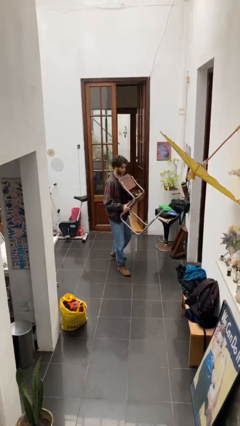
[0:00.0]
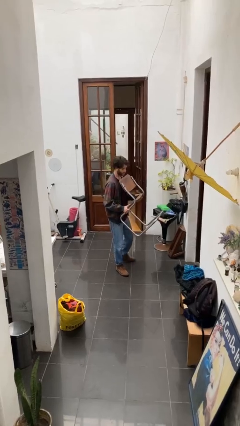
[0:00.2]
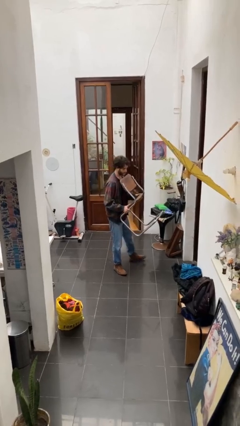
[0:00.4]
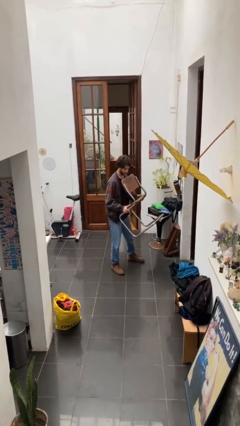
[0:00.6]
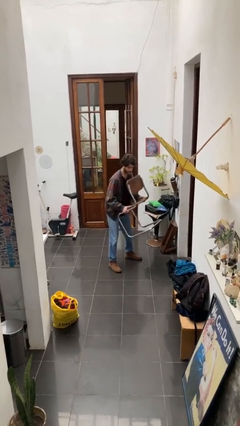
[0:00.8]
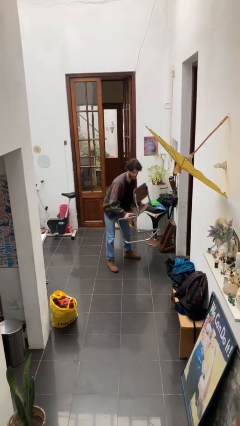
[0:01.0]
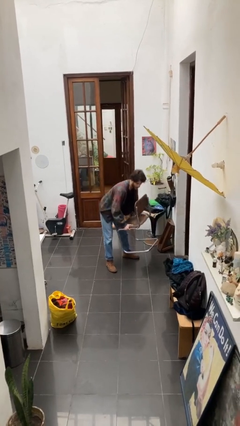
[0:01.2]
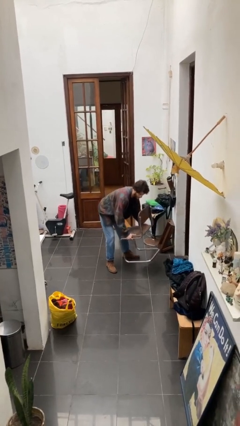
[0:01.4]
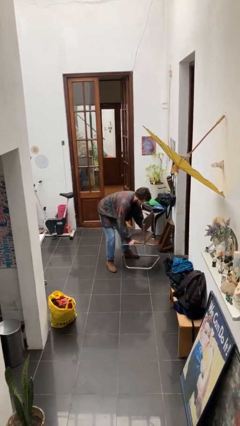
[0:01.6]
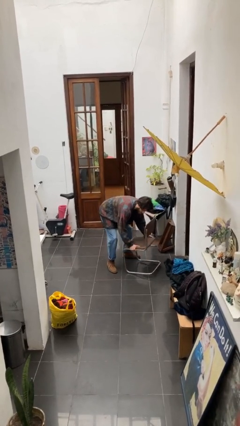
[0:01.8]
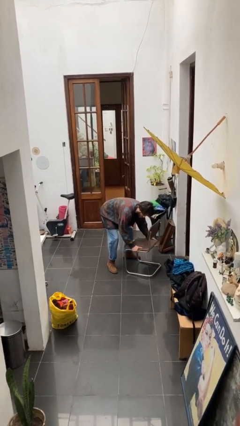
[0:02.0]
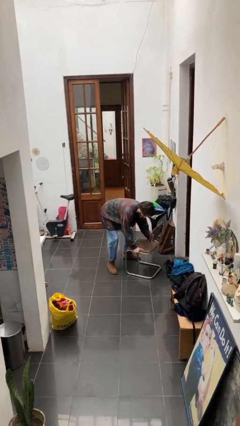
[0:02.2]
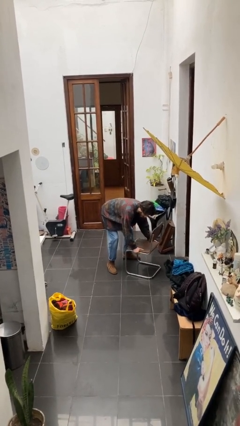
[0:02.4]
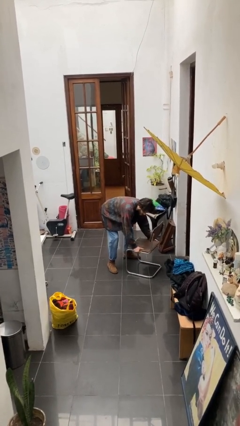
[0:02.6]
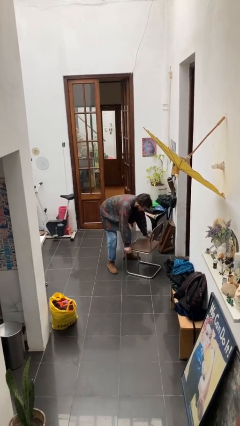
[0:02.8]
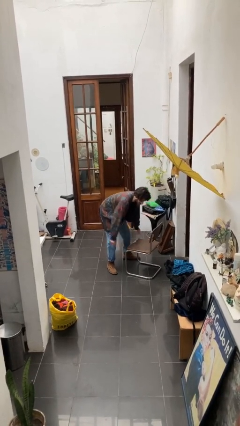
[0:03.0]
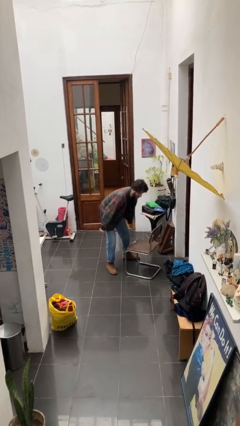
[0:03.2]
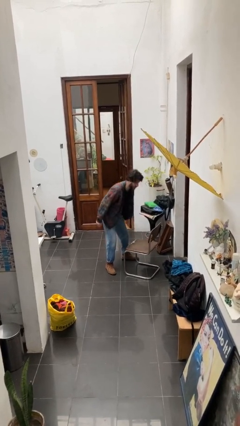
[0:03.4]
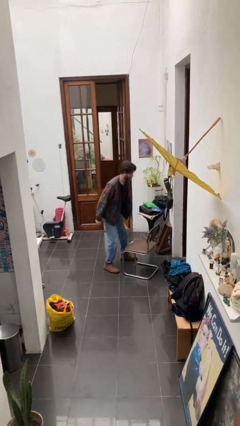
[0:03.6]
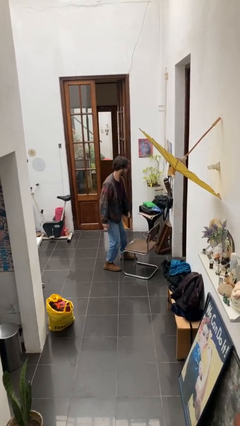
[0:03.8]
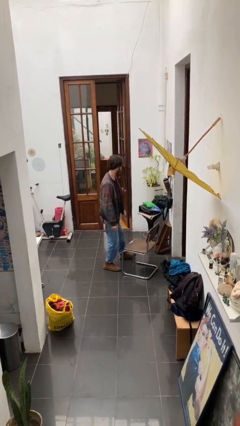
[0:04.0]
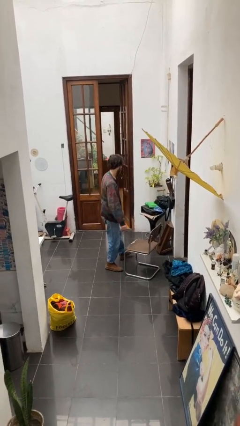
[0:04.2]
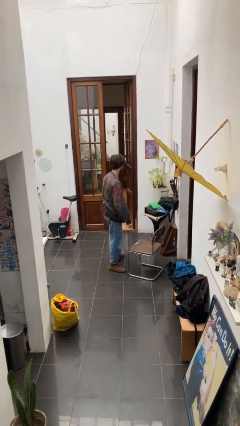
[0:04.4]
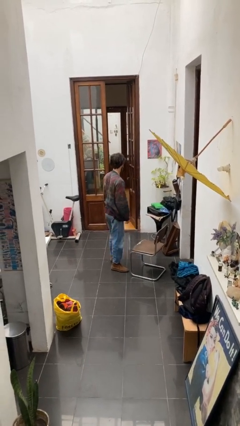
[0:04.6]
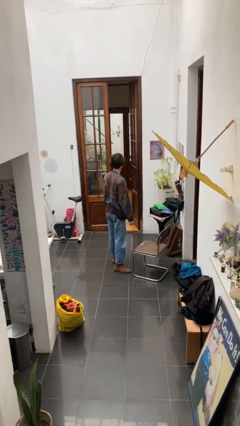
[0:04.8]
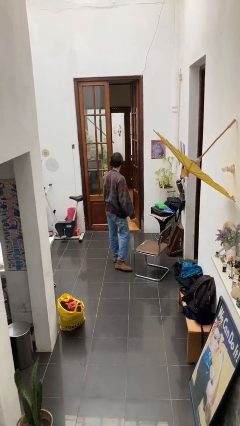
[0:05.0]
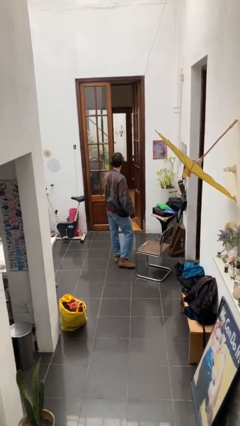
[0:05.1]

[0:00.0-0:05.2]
person puts down object on floor

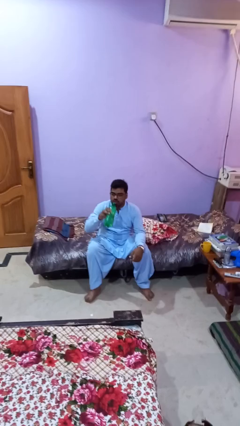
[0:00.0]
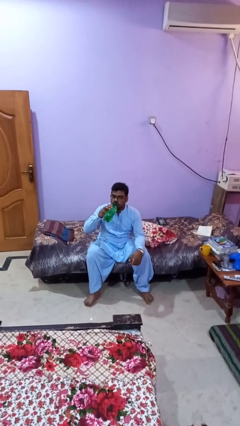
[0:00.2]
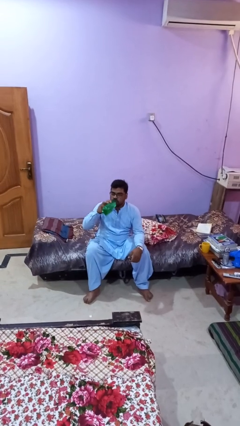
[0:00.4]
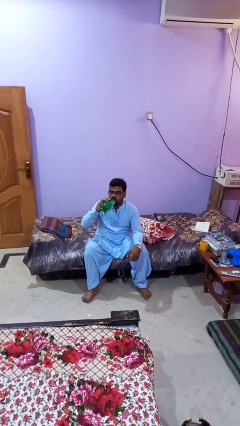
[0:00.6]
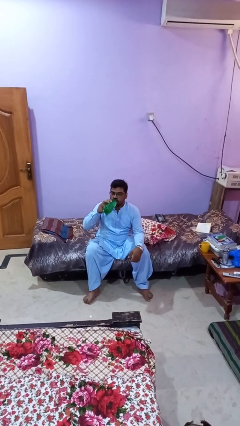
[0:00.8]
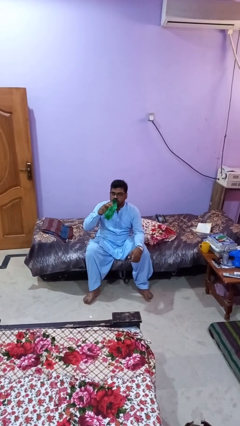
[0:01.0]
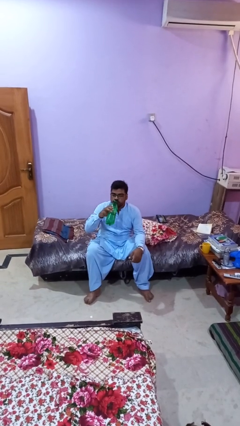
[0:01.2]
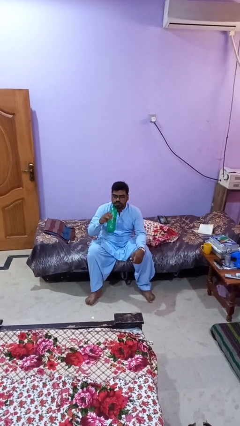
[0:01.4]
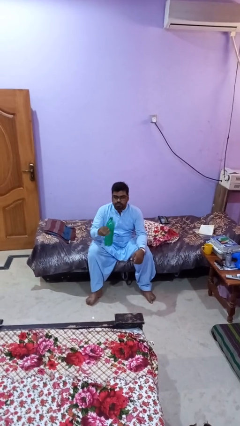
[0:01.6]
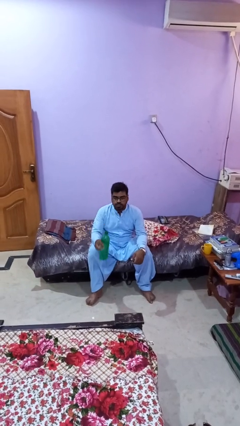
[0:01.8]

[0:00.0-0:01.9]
person drinks from bottle

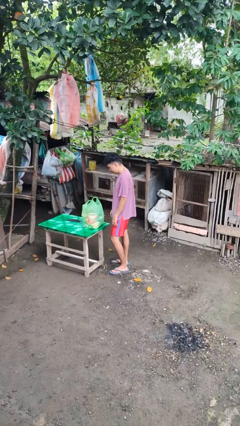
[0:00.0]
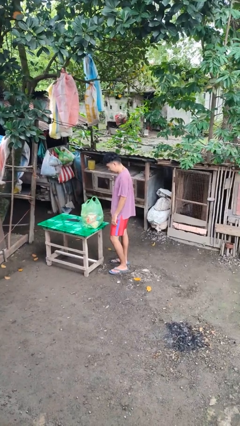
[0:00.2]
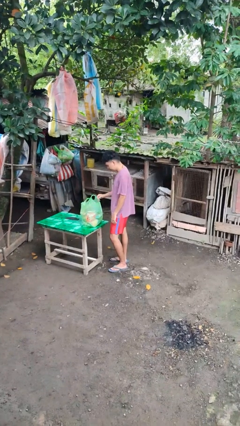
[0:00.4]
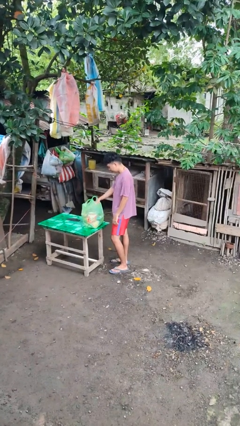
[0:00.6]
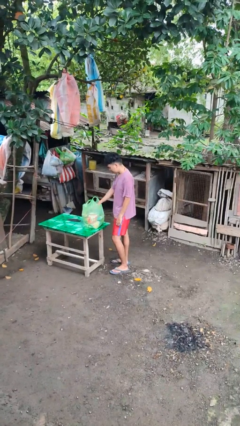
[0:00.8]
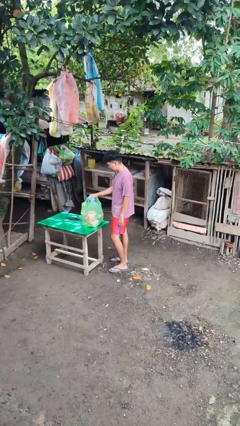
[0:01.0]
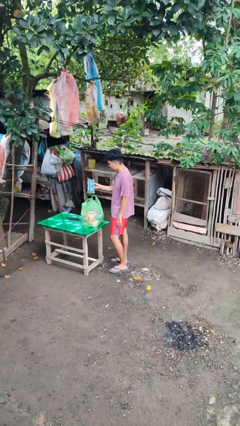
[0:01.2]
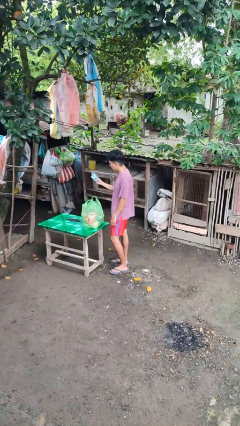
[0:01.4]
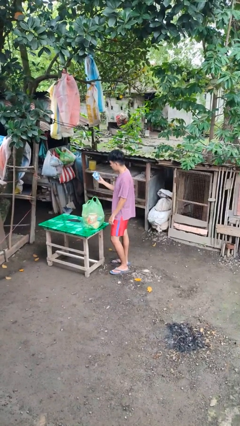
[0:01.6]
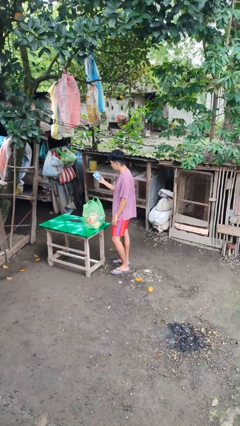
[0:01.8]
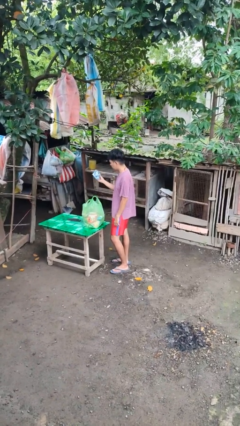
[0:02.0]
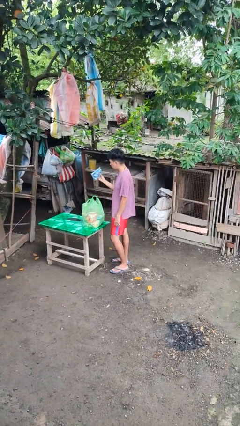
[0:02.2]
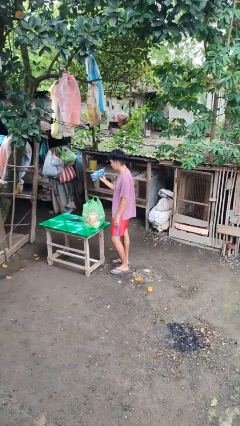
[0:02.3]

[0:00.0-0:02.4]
person takes object from bag

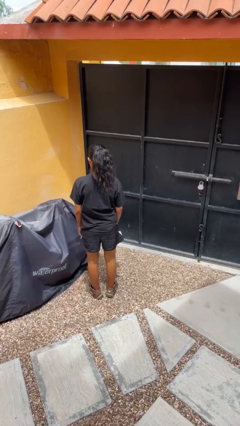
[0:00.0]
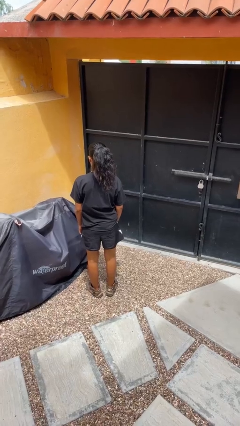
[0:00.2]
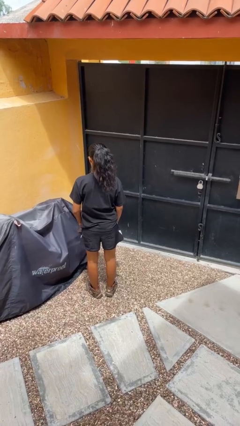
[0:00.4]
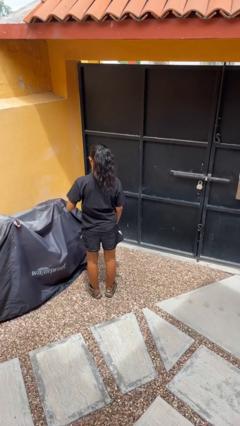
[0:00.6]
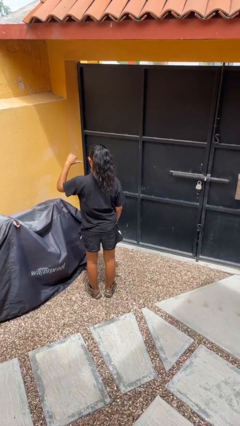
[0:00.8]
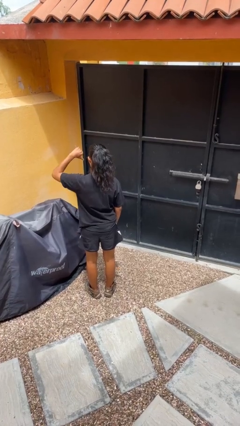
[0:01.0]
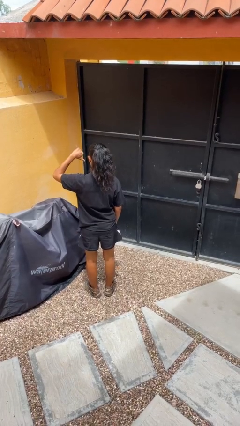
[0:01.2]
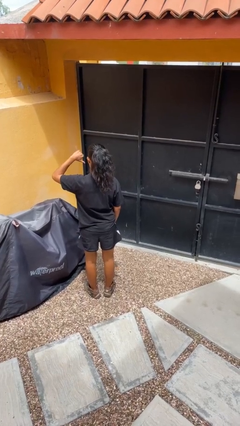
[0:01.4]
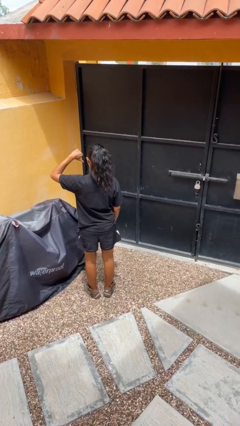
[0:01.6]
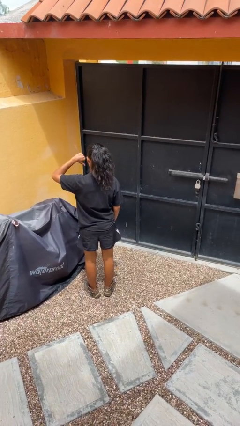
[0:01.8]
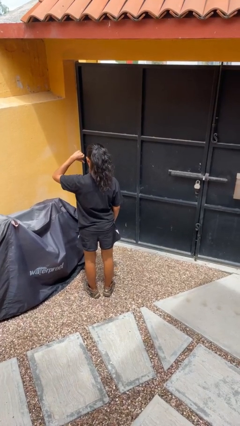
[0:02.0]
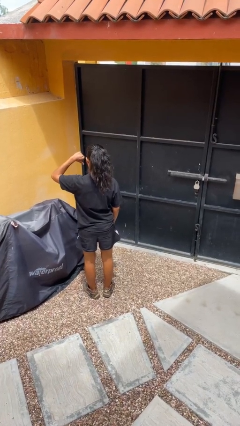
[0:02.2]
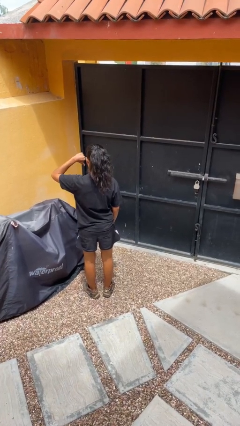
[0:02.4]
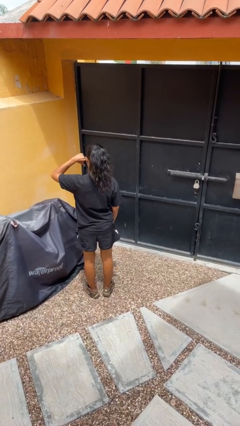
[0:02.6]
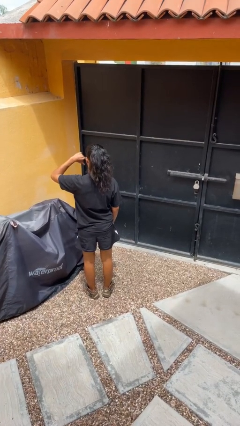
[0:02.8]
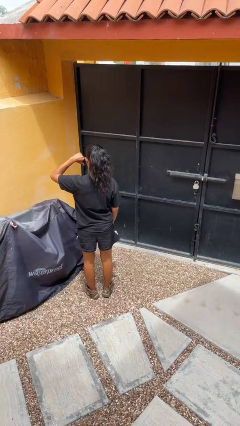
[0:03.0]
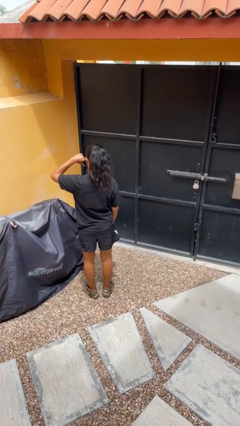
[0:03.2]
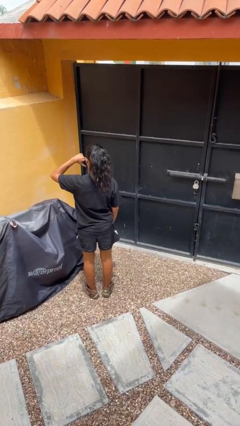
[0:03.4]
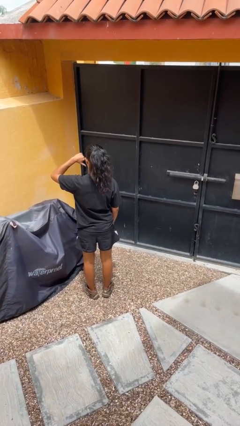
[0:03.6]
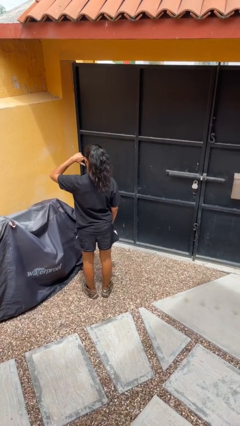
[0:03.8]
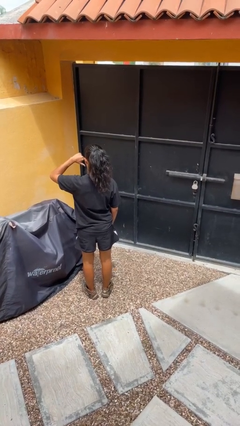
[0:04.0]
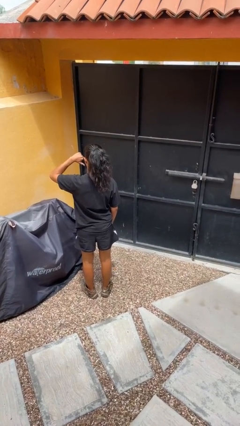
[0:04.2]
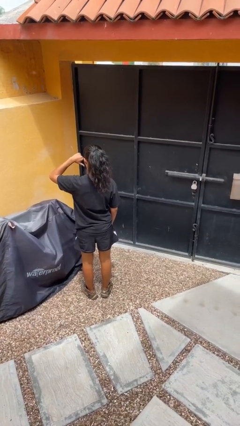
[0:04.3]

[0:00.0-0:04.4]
person gestures thumbs down

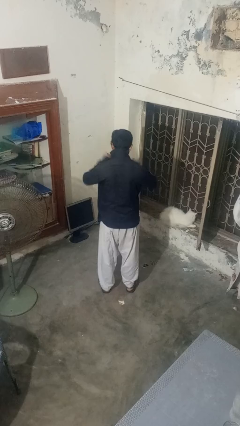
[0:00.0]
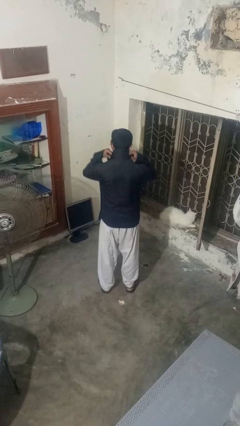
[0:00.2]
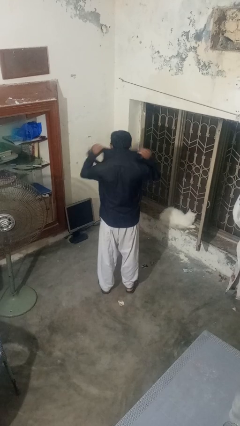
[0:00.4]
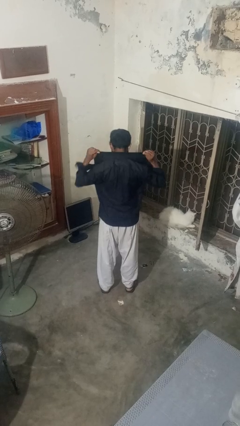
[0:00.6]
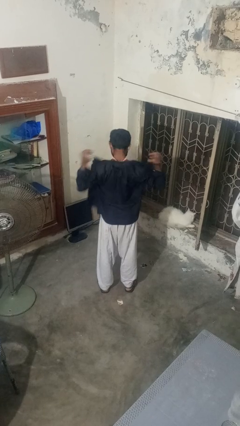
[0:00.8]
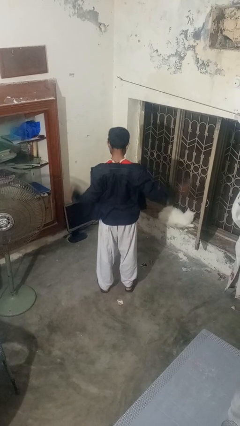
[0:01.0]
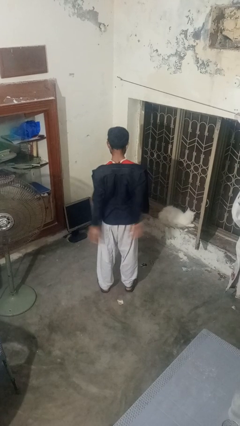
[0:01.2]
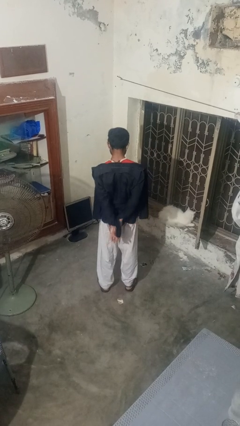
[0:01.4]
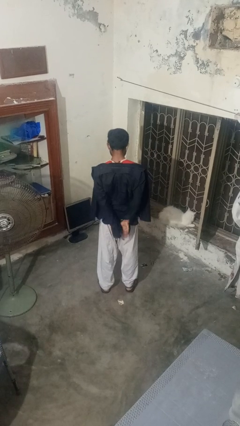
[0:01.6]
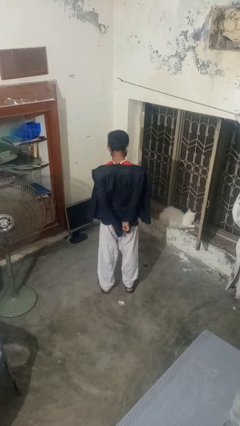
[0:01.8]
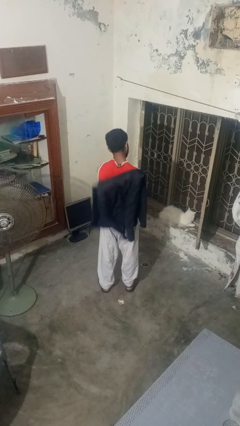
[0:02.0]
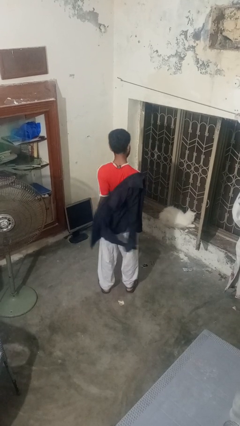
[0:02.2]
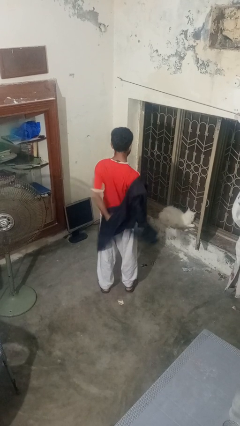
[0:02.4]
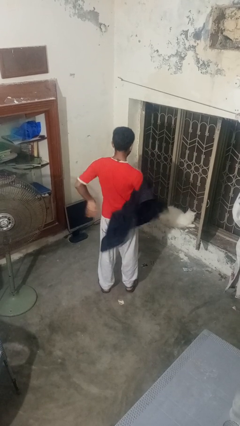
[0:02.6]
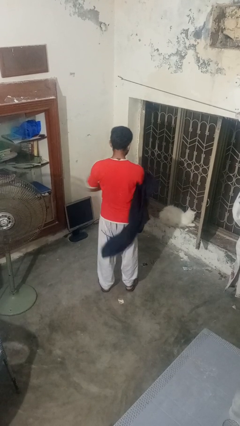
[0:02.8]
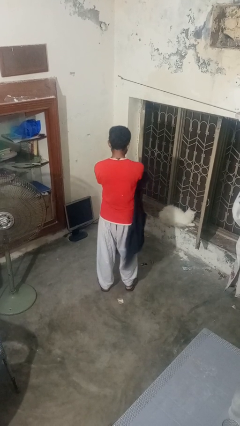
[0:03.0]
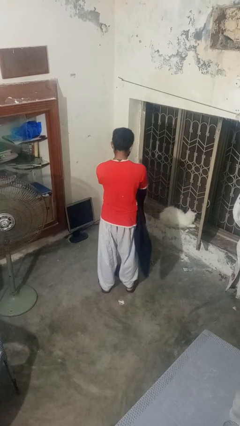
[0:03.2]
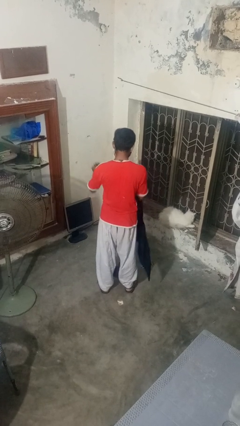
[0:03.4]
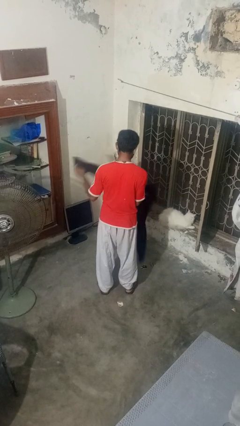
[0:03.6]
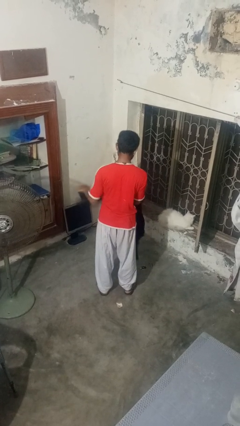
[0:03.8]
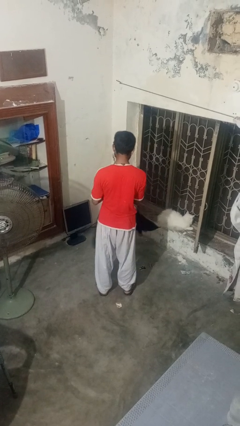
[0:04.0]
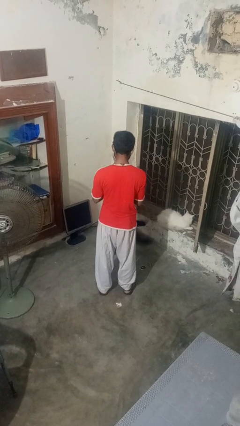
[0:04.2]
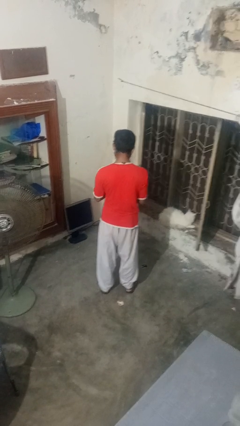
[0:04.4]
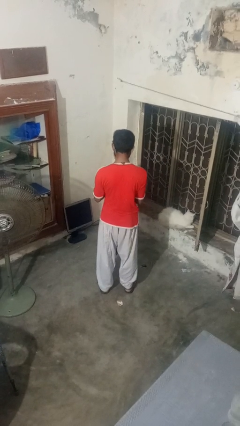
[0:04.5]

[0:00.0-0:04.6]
person takes off shirt
